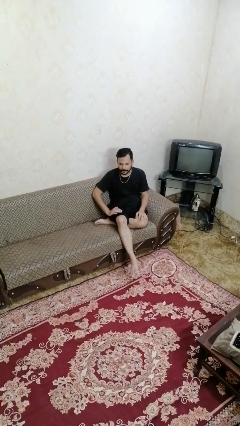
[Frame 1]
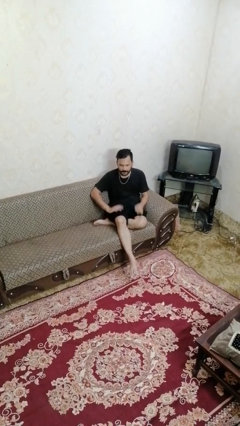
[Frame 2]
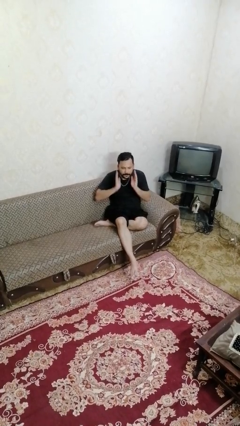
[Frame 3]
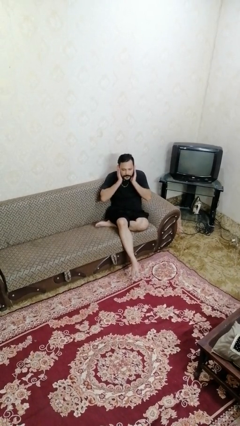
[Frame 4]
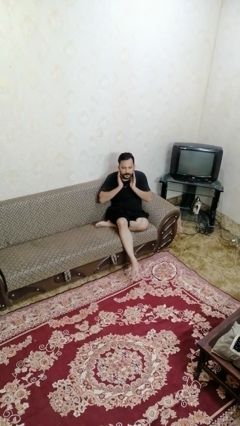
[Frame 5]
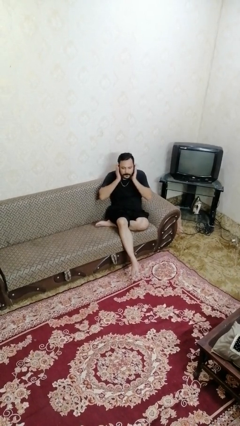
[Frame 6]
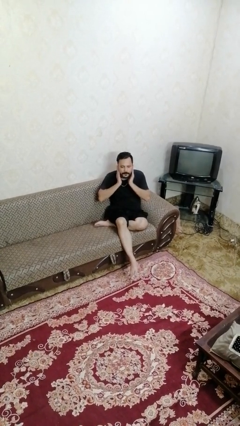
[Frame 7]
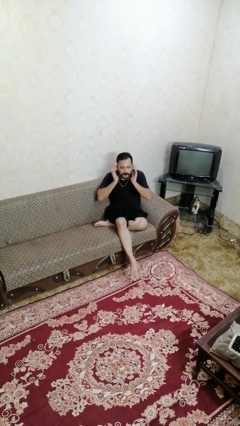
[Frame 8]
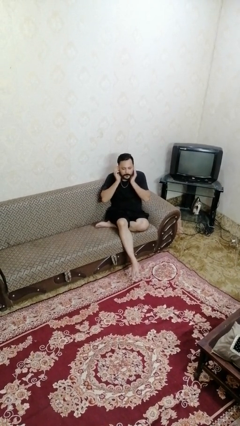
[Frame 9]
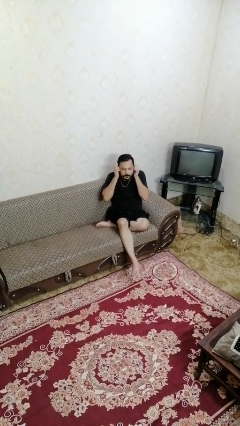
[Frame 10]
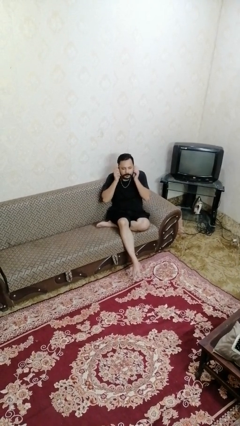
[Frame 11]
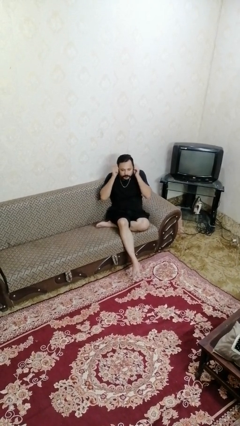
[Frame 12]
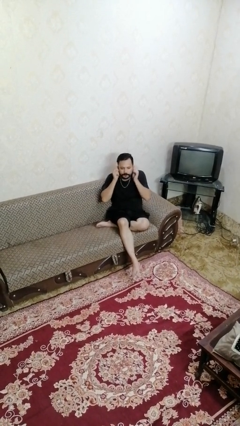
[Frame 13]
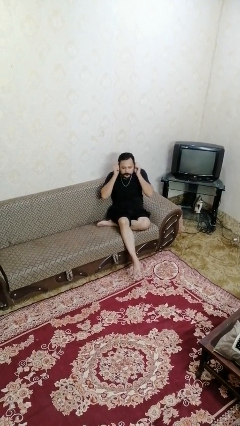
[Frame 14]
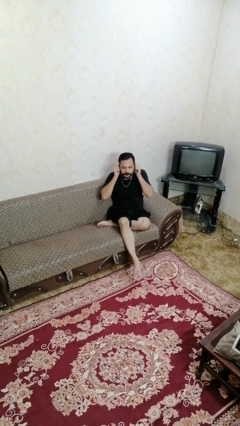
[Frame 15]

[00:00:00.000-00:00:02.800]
person touches earlobe

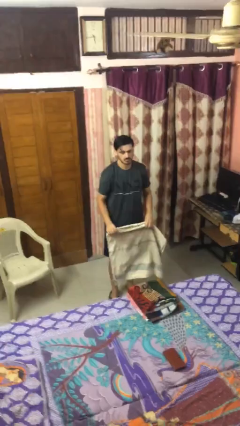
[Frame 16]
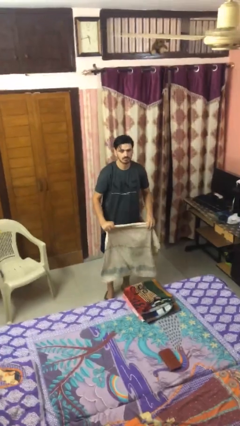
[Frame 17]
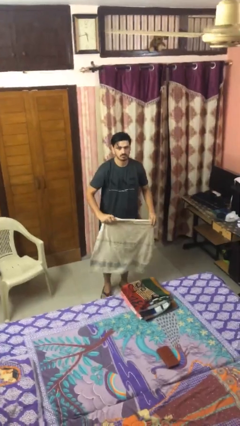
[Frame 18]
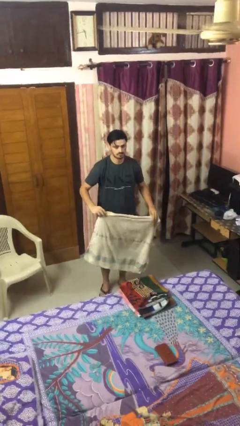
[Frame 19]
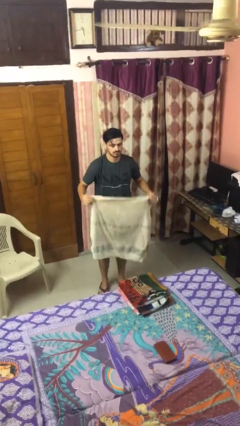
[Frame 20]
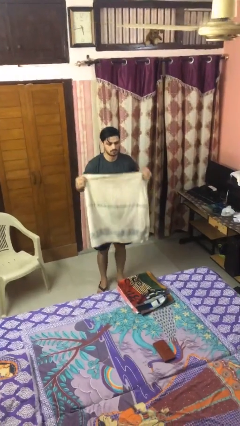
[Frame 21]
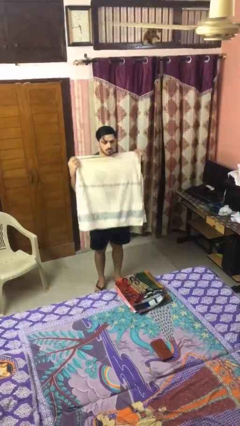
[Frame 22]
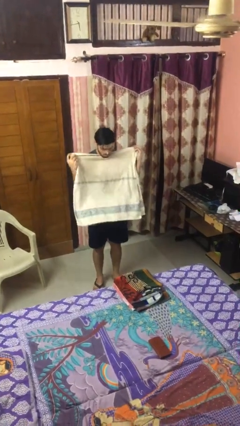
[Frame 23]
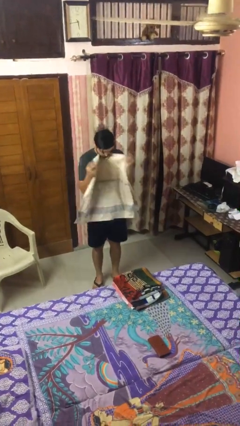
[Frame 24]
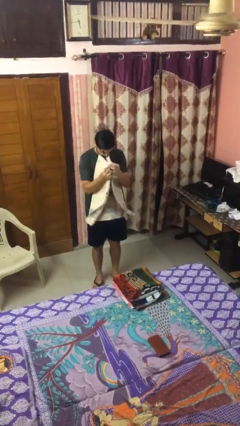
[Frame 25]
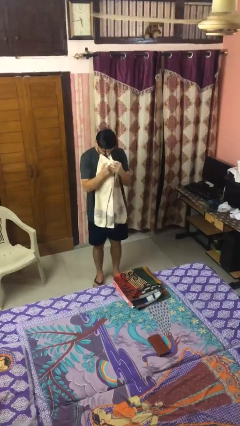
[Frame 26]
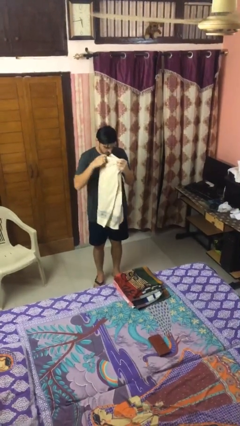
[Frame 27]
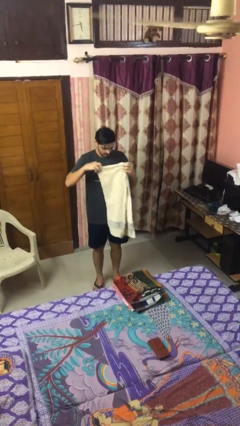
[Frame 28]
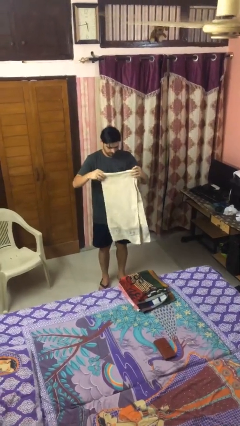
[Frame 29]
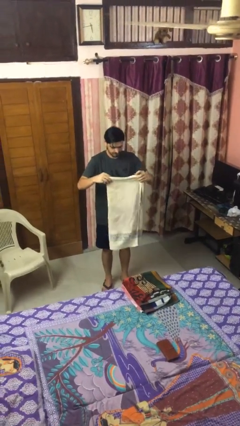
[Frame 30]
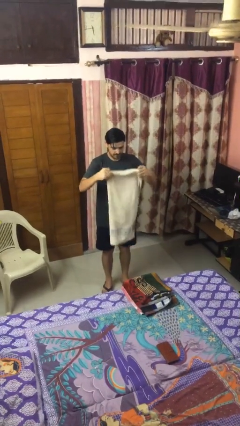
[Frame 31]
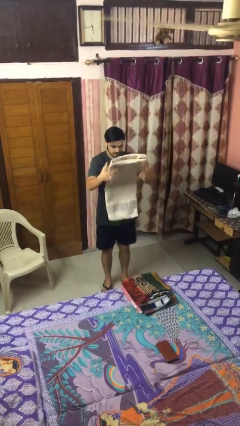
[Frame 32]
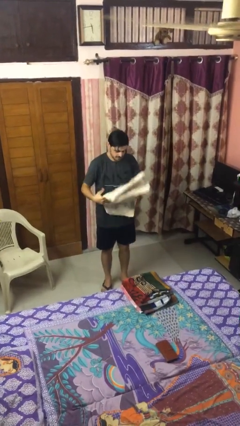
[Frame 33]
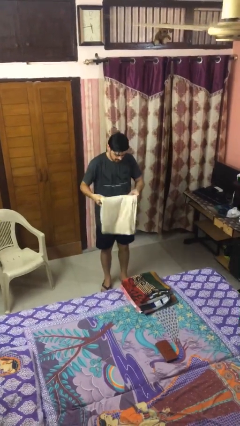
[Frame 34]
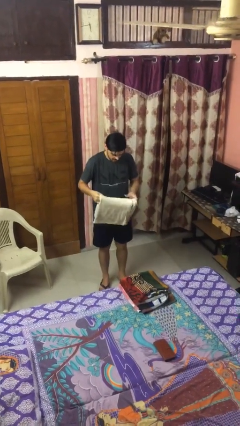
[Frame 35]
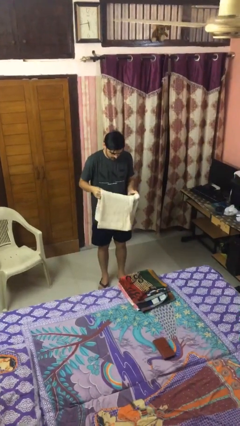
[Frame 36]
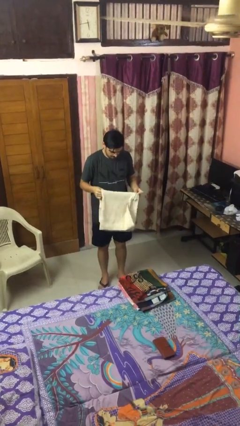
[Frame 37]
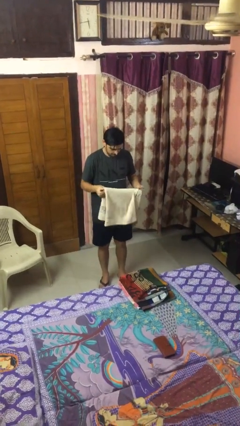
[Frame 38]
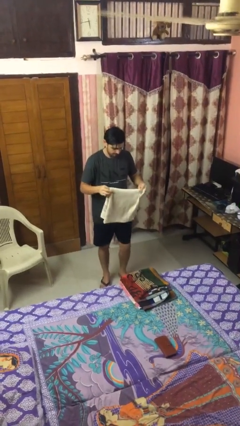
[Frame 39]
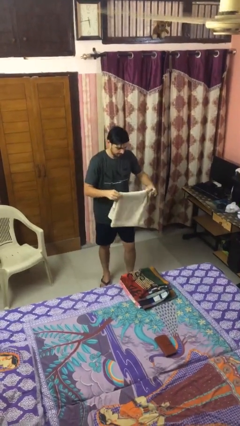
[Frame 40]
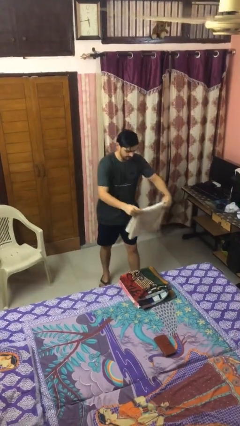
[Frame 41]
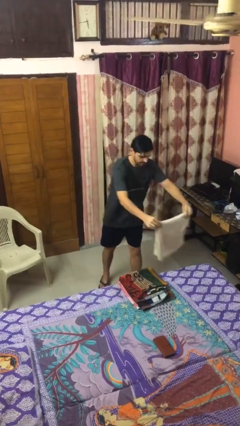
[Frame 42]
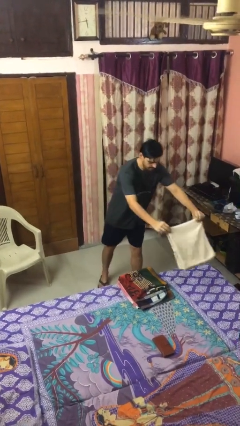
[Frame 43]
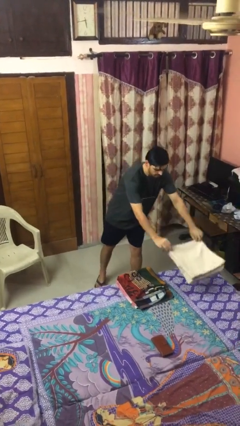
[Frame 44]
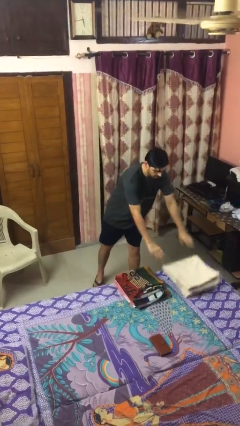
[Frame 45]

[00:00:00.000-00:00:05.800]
person folds towel

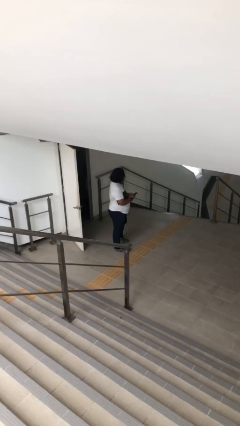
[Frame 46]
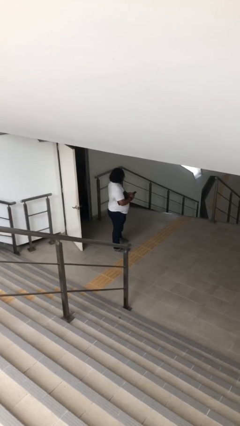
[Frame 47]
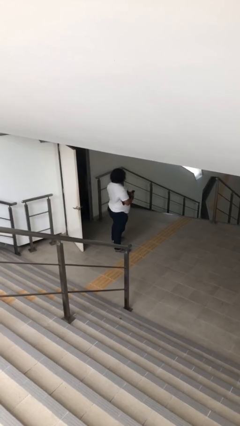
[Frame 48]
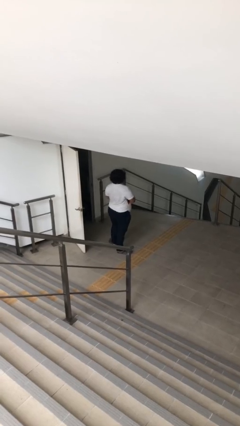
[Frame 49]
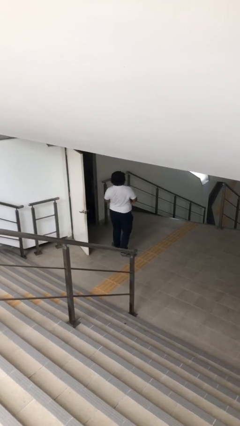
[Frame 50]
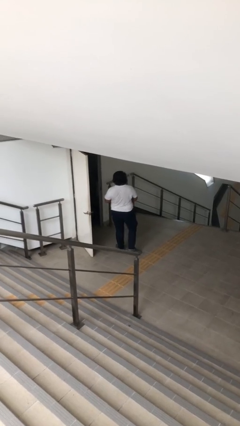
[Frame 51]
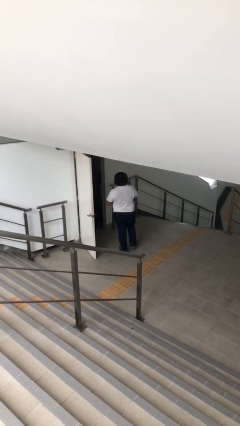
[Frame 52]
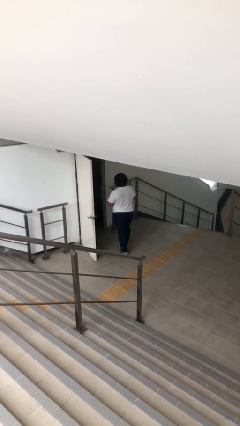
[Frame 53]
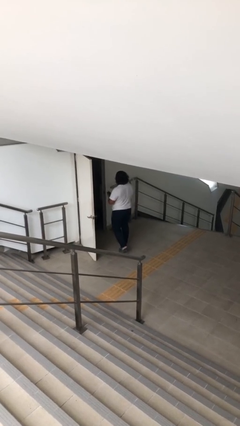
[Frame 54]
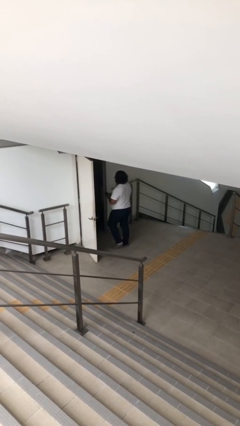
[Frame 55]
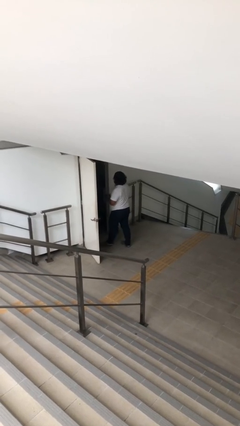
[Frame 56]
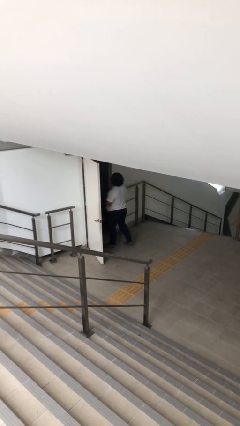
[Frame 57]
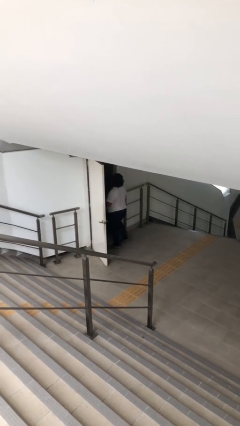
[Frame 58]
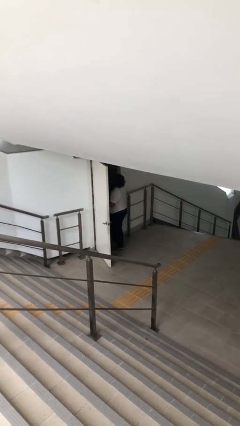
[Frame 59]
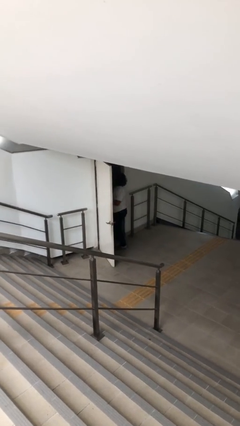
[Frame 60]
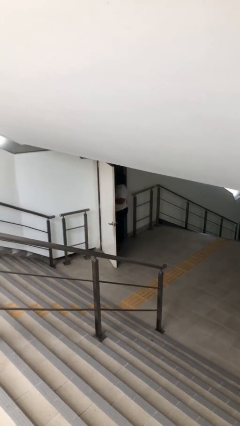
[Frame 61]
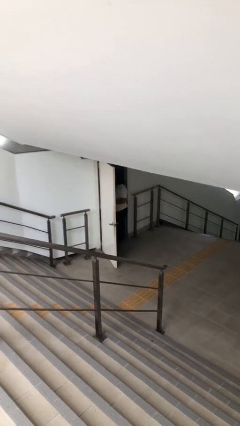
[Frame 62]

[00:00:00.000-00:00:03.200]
person exits scene through structure

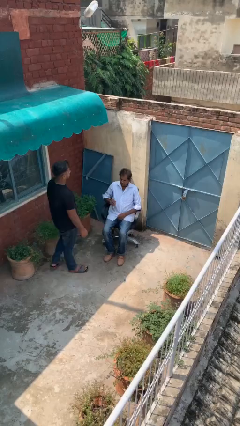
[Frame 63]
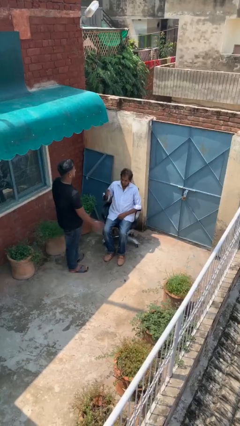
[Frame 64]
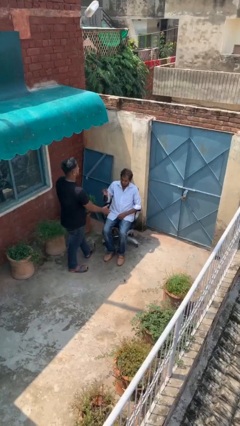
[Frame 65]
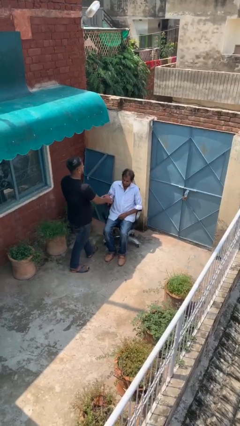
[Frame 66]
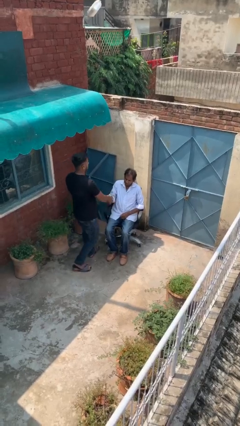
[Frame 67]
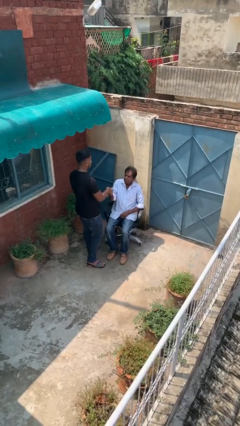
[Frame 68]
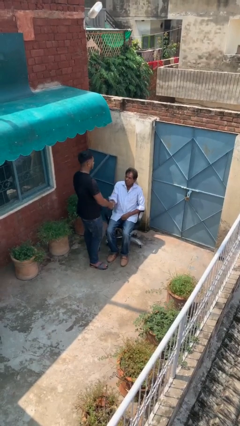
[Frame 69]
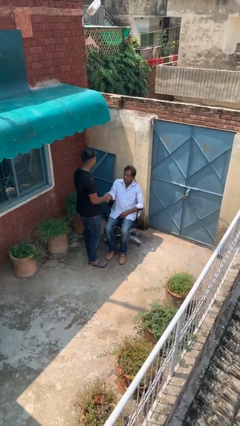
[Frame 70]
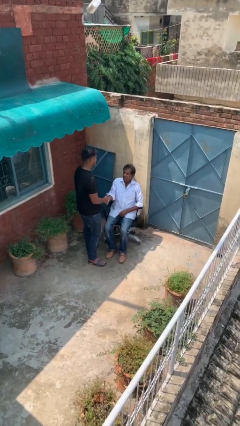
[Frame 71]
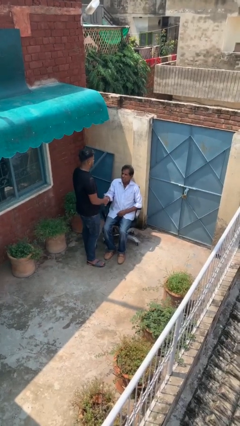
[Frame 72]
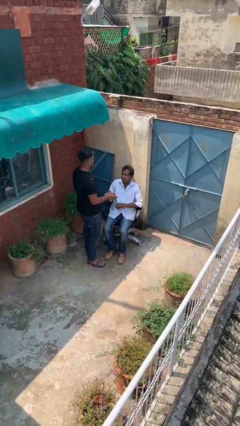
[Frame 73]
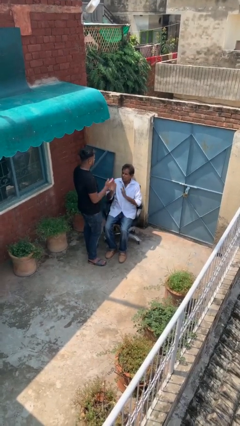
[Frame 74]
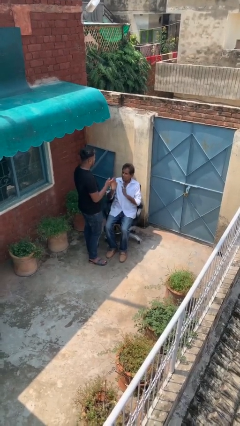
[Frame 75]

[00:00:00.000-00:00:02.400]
person shakes hand

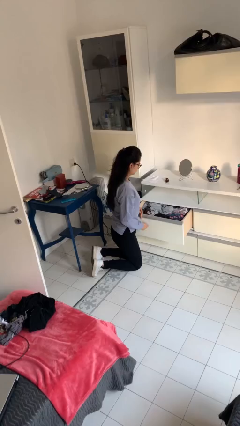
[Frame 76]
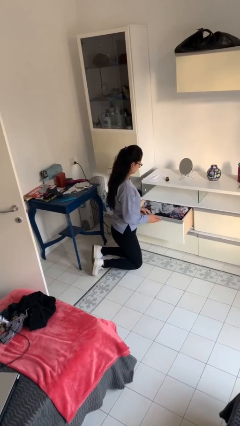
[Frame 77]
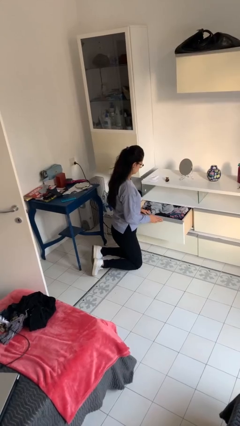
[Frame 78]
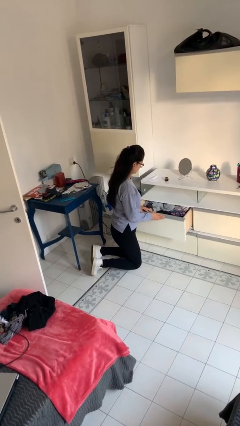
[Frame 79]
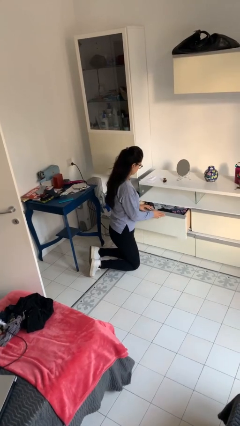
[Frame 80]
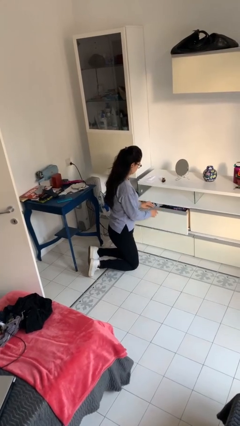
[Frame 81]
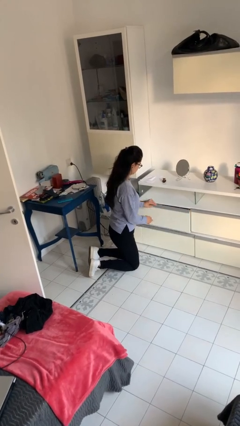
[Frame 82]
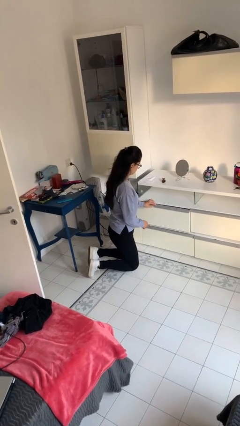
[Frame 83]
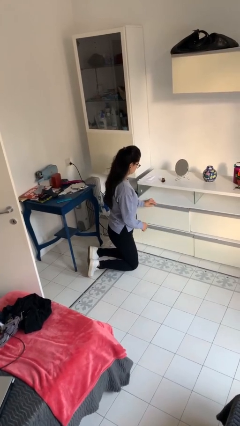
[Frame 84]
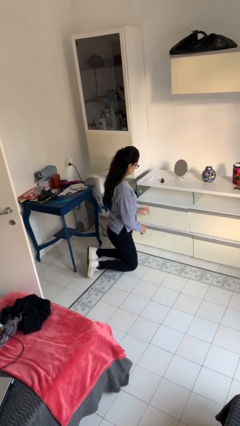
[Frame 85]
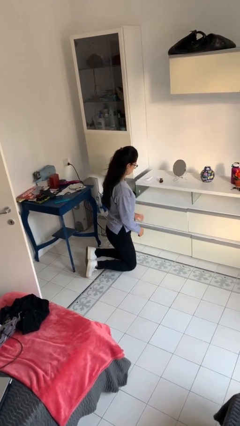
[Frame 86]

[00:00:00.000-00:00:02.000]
person closes dresser drawer

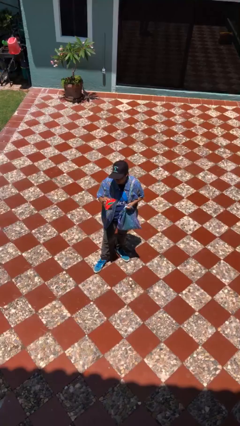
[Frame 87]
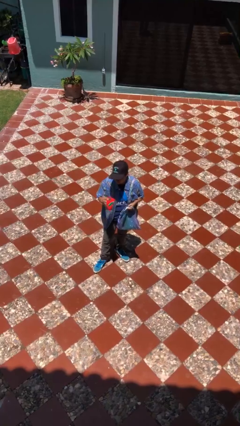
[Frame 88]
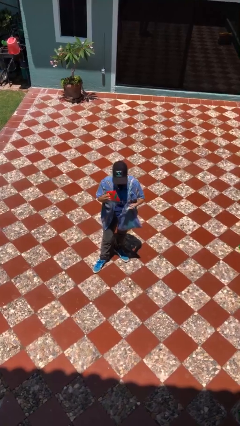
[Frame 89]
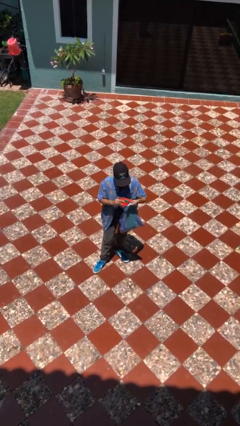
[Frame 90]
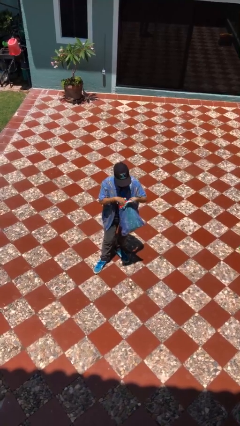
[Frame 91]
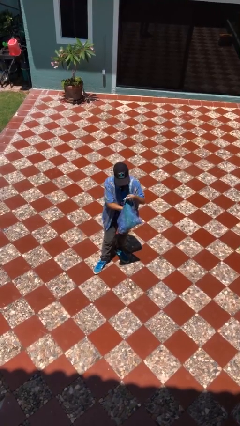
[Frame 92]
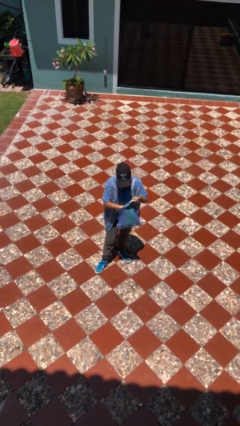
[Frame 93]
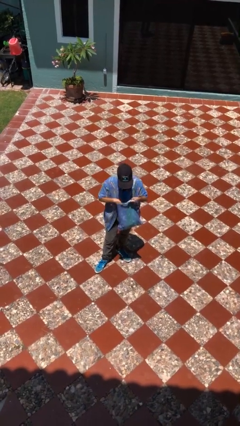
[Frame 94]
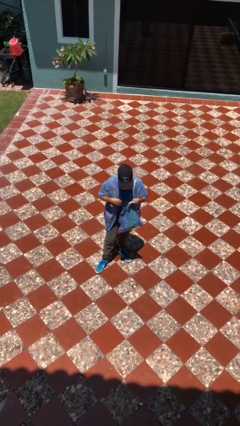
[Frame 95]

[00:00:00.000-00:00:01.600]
person puts object into purse
